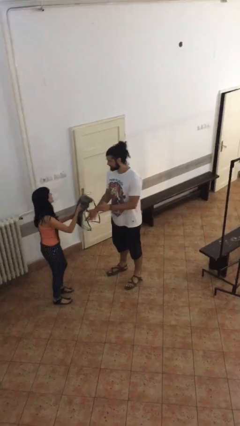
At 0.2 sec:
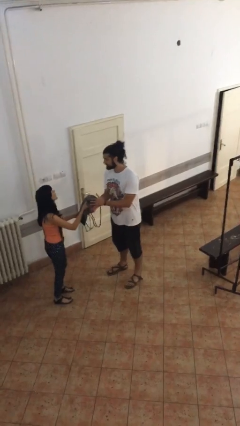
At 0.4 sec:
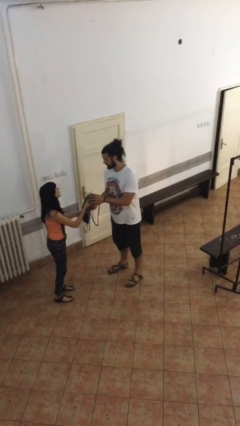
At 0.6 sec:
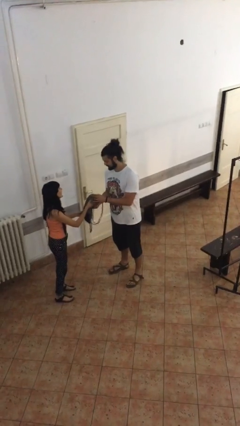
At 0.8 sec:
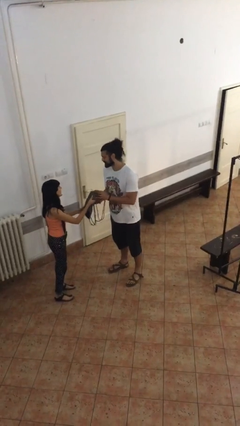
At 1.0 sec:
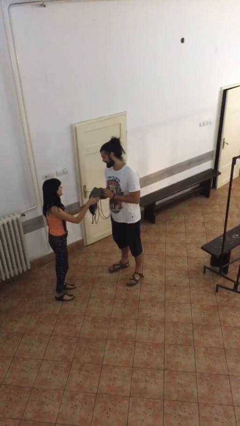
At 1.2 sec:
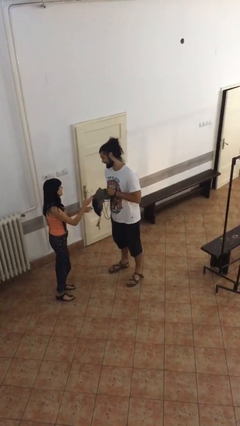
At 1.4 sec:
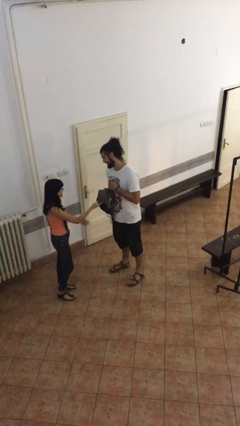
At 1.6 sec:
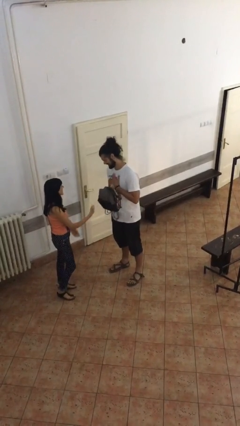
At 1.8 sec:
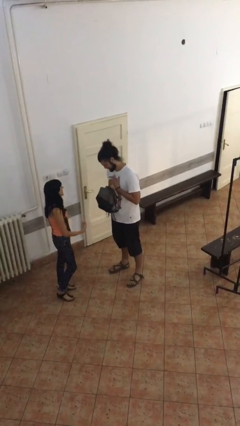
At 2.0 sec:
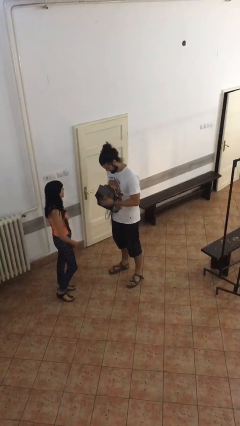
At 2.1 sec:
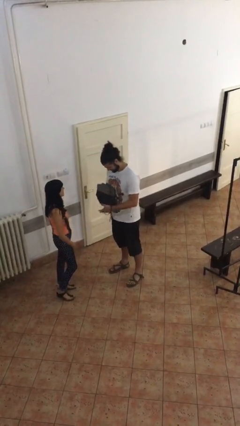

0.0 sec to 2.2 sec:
person transfers object to person

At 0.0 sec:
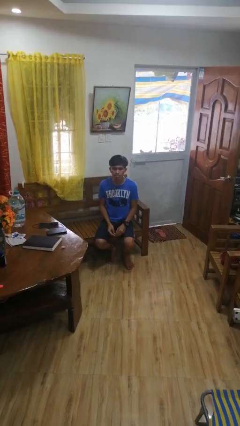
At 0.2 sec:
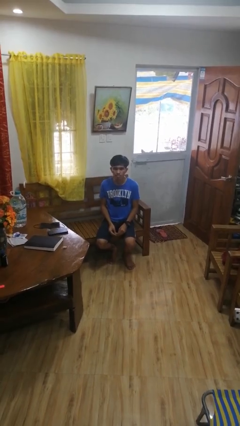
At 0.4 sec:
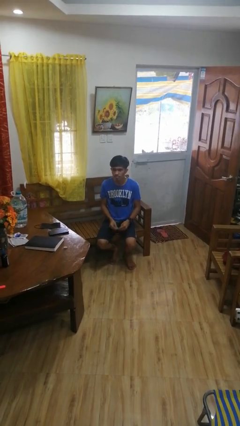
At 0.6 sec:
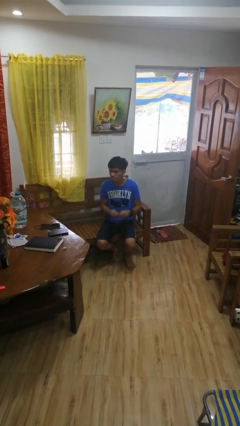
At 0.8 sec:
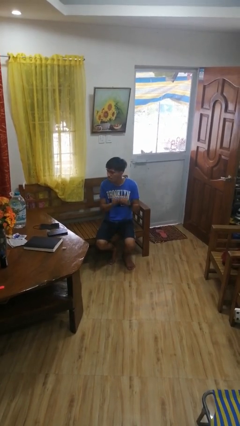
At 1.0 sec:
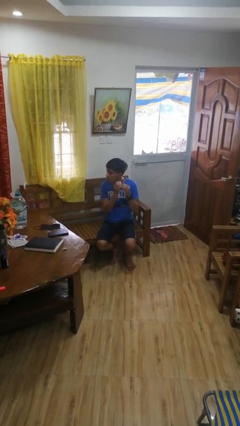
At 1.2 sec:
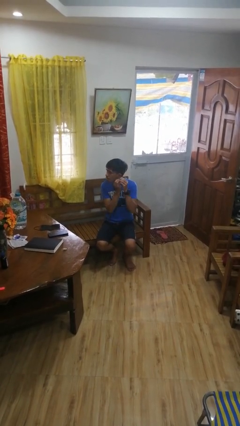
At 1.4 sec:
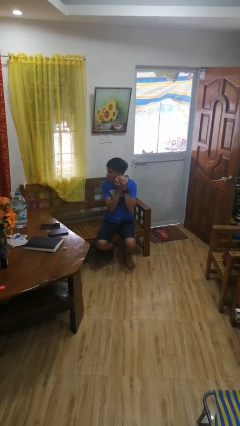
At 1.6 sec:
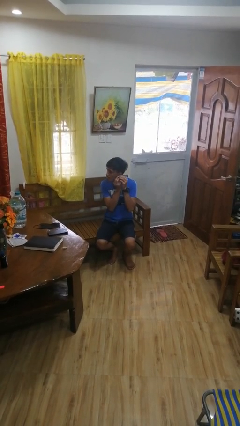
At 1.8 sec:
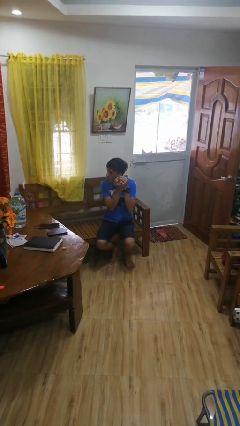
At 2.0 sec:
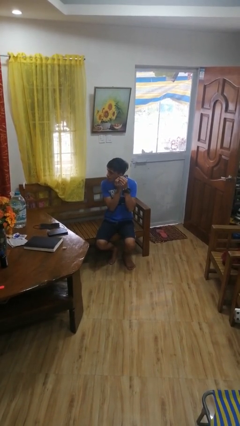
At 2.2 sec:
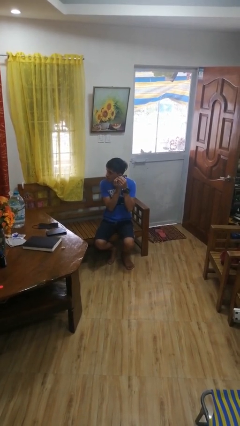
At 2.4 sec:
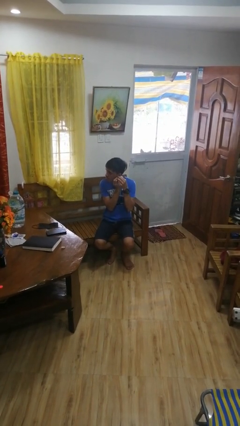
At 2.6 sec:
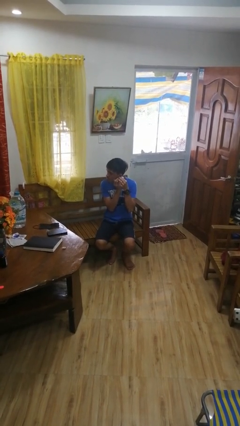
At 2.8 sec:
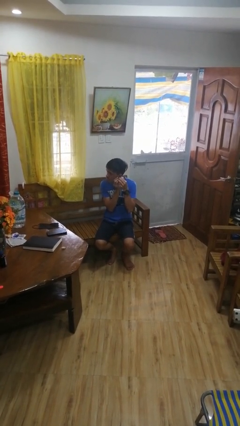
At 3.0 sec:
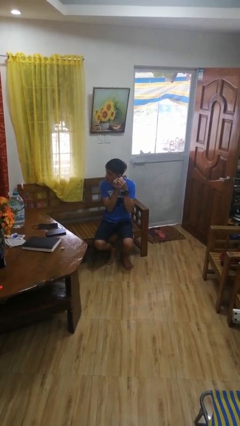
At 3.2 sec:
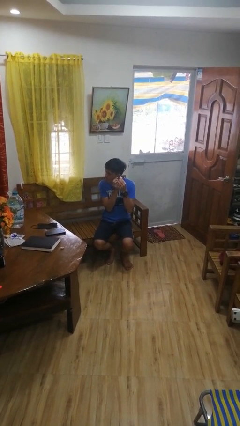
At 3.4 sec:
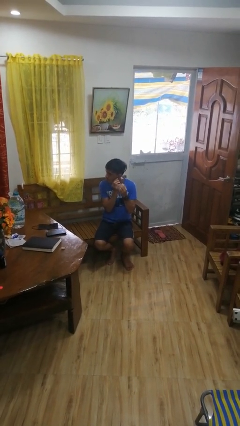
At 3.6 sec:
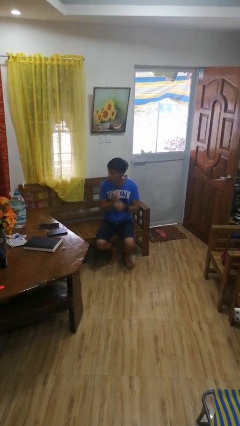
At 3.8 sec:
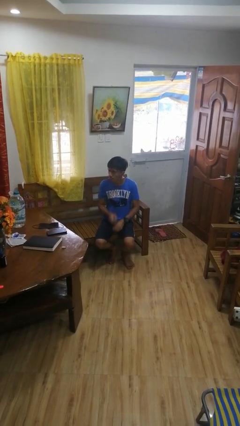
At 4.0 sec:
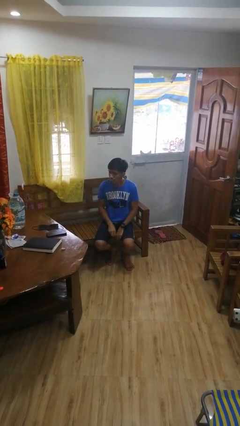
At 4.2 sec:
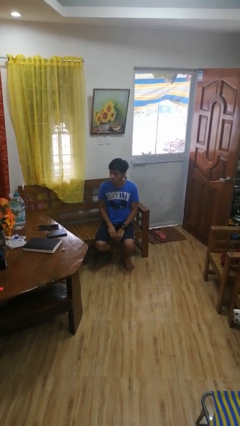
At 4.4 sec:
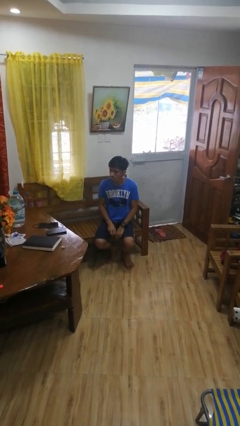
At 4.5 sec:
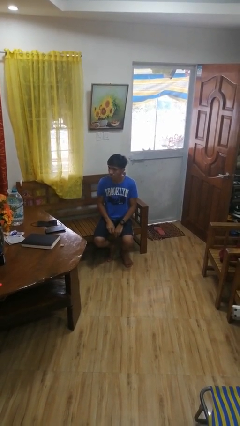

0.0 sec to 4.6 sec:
person puts on earrings

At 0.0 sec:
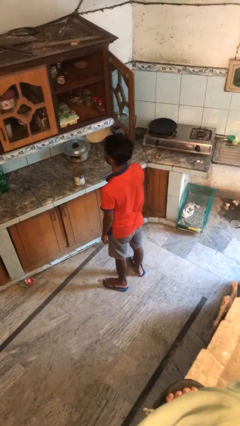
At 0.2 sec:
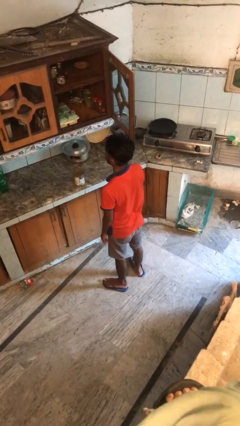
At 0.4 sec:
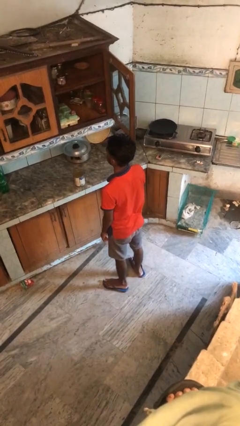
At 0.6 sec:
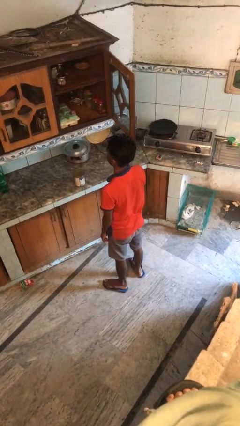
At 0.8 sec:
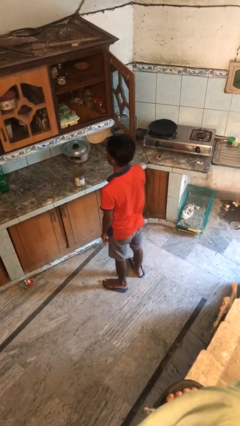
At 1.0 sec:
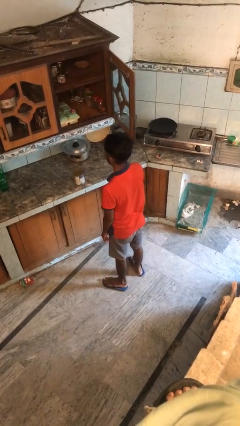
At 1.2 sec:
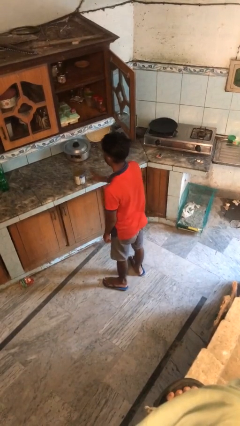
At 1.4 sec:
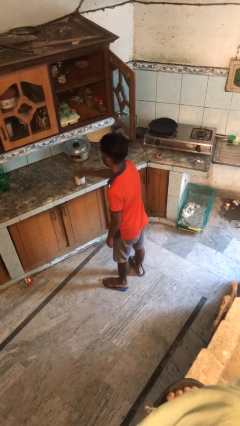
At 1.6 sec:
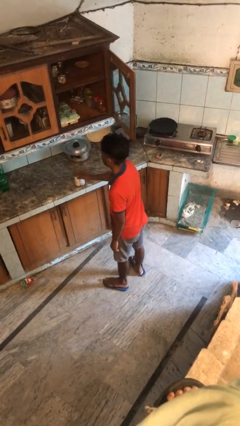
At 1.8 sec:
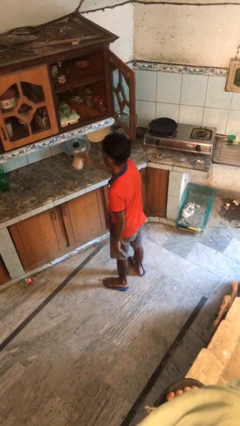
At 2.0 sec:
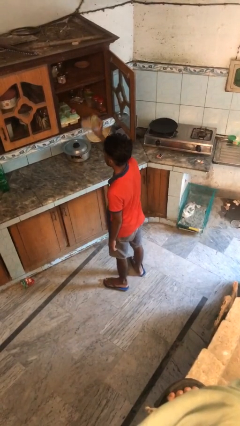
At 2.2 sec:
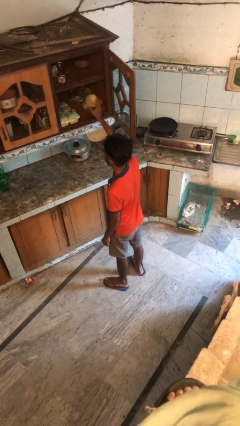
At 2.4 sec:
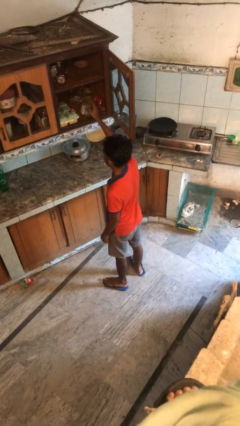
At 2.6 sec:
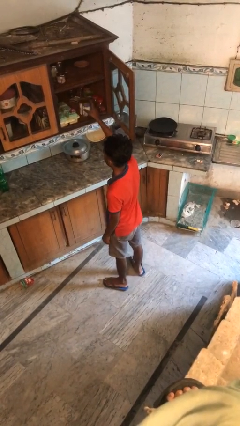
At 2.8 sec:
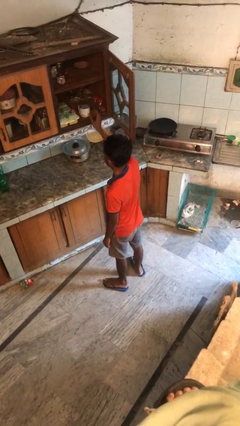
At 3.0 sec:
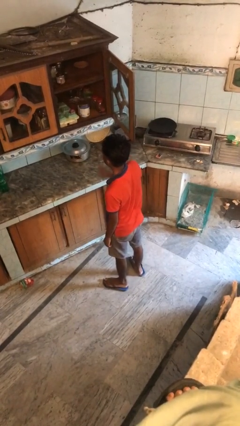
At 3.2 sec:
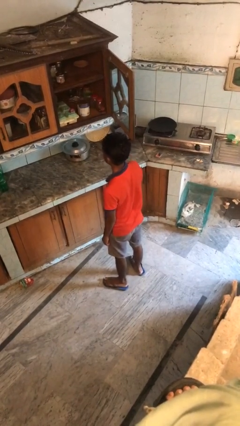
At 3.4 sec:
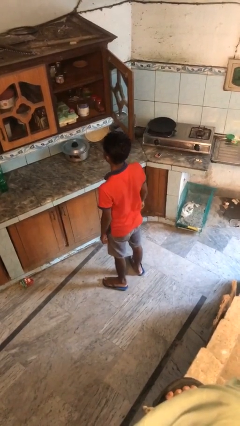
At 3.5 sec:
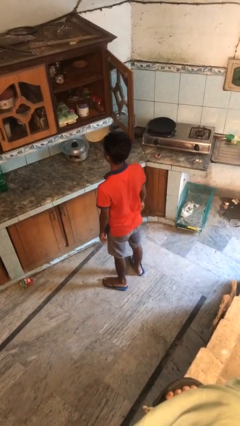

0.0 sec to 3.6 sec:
person puts object in cabinet

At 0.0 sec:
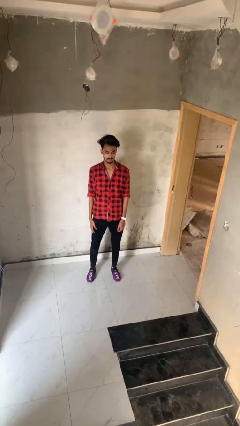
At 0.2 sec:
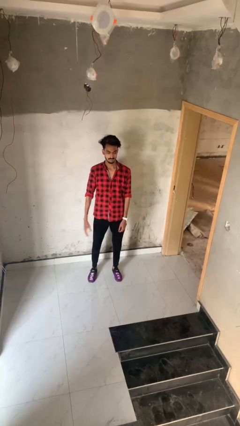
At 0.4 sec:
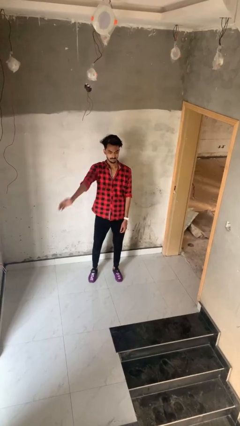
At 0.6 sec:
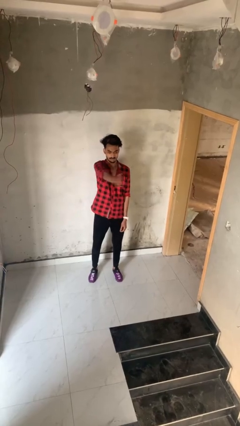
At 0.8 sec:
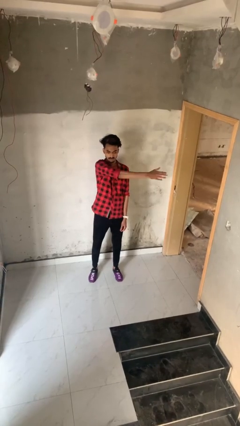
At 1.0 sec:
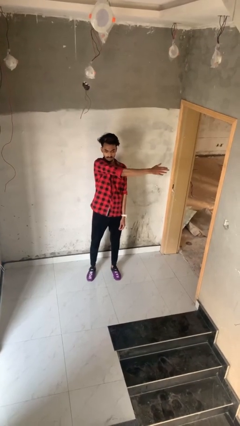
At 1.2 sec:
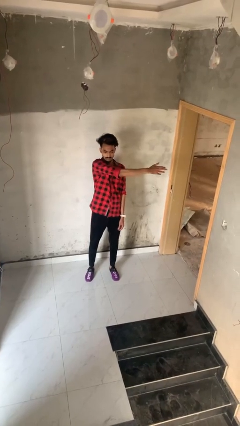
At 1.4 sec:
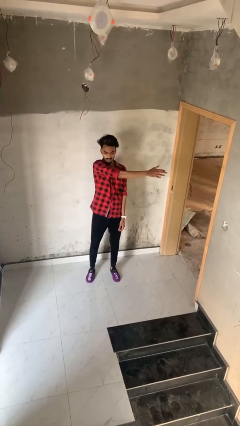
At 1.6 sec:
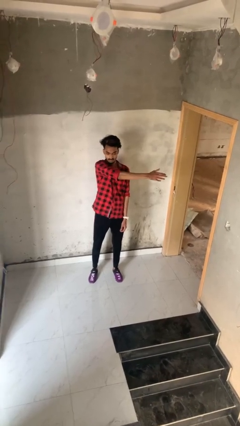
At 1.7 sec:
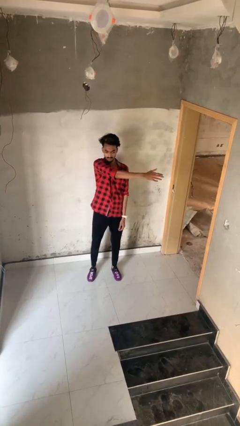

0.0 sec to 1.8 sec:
person gestures swipe left

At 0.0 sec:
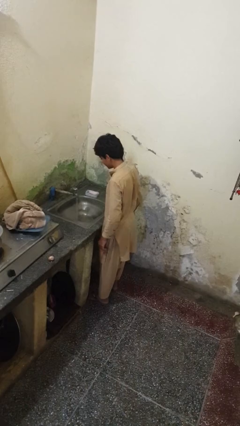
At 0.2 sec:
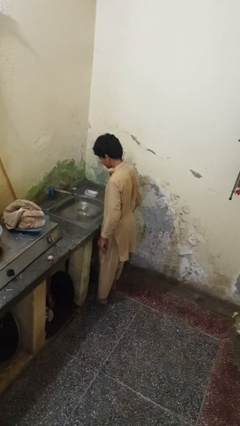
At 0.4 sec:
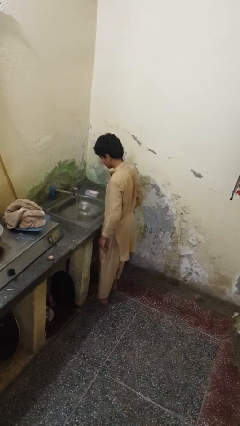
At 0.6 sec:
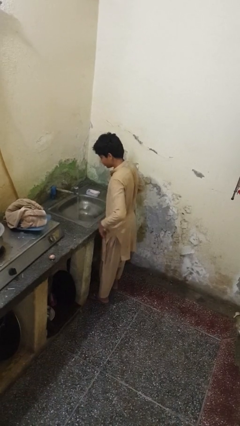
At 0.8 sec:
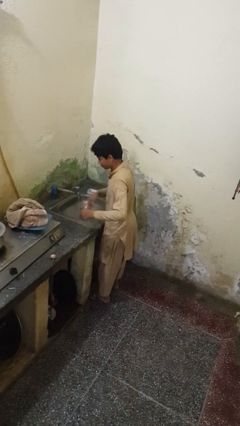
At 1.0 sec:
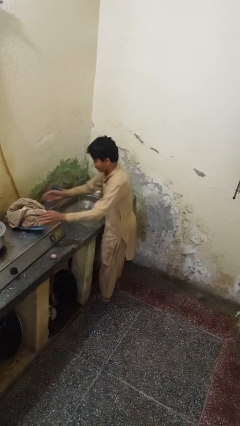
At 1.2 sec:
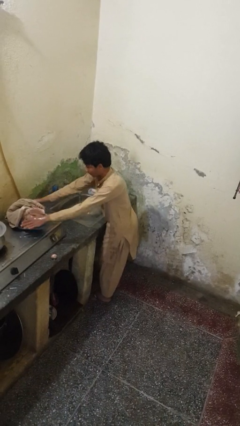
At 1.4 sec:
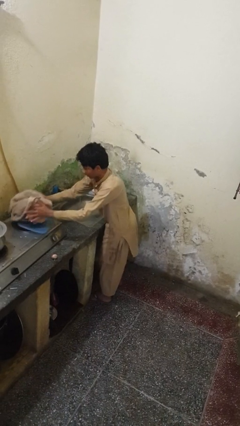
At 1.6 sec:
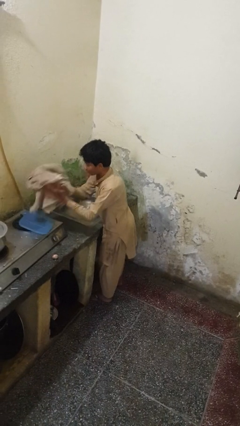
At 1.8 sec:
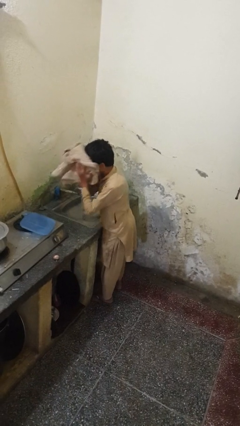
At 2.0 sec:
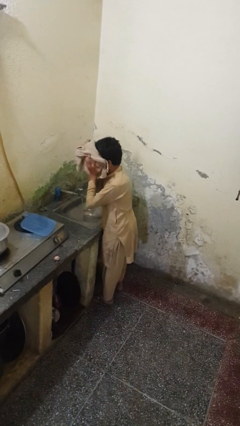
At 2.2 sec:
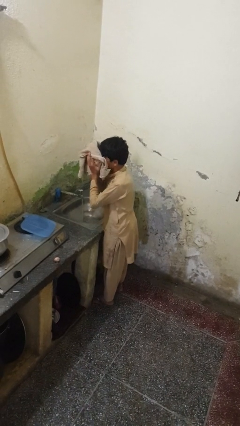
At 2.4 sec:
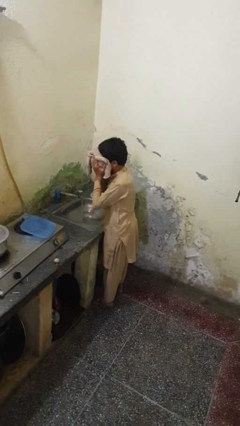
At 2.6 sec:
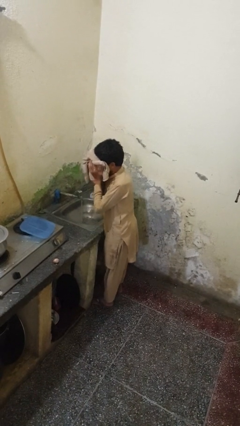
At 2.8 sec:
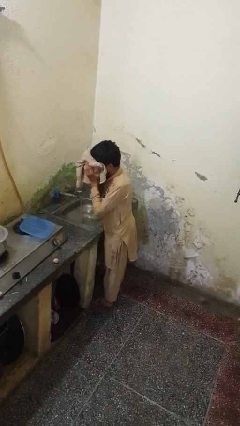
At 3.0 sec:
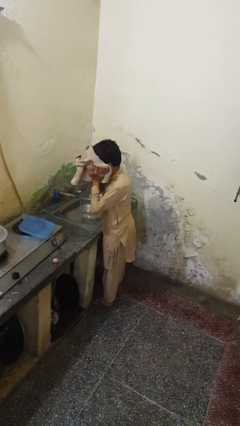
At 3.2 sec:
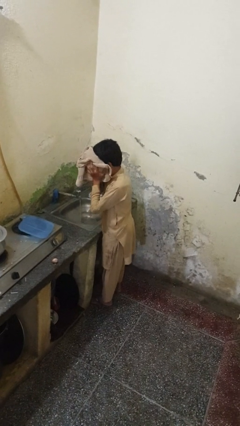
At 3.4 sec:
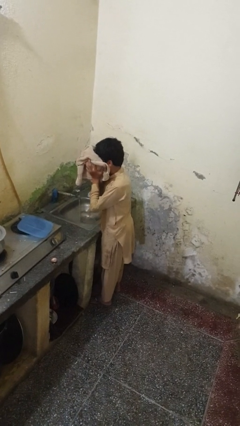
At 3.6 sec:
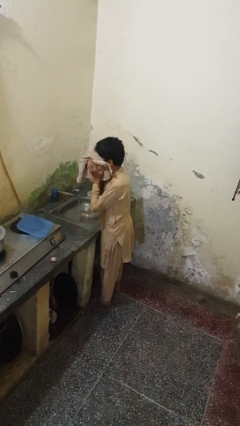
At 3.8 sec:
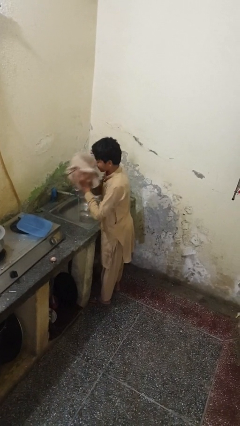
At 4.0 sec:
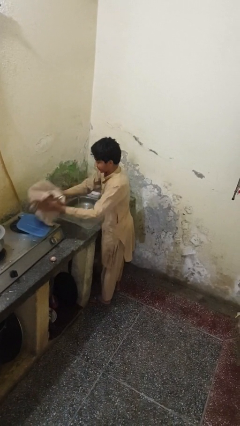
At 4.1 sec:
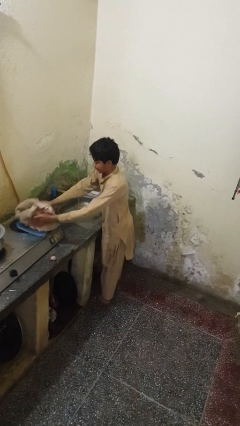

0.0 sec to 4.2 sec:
person dries face with towel

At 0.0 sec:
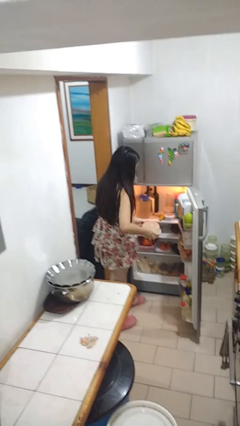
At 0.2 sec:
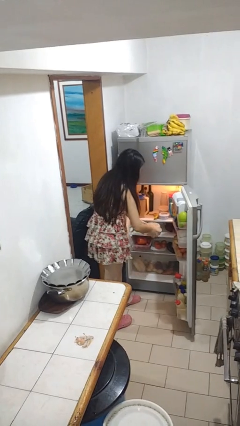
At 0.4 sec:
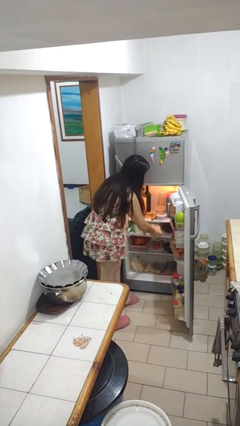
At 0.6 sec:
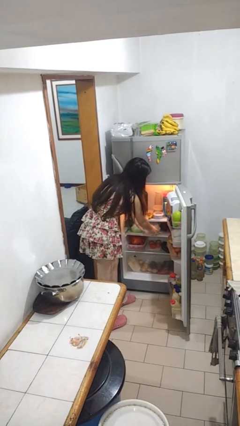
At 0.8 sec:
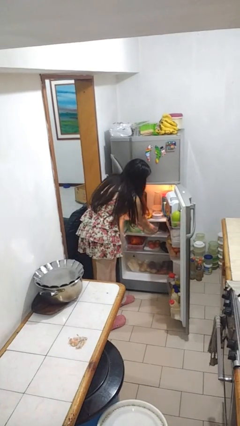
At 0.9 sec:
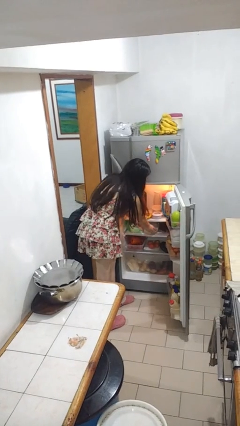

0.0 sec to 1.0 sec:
person puts object into refrigerator
